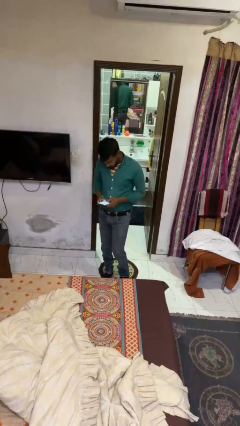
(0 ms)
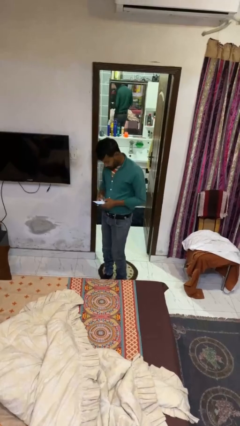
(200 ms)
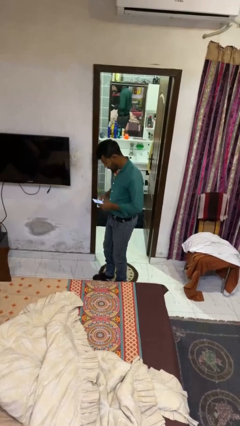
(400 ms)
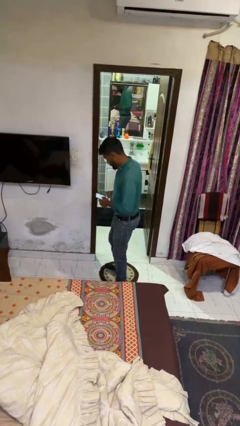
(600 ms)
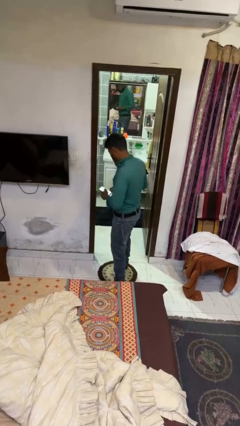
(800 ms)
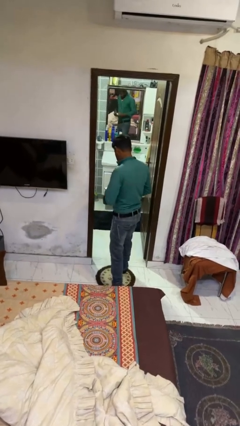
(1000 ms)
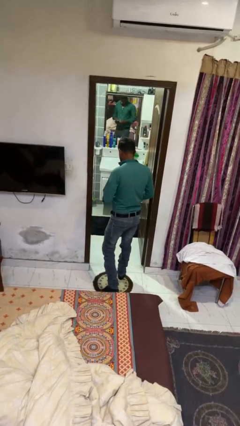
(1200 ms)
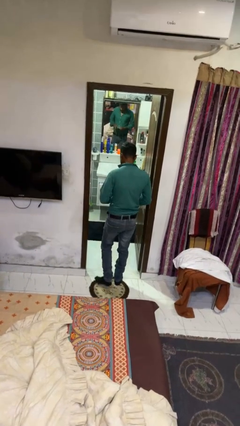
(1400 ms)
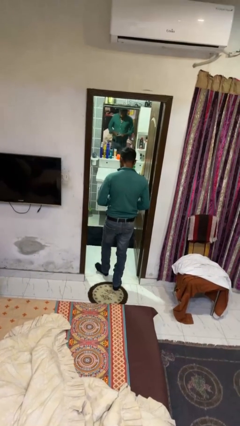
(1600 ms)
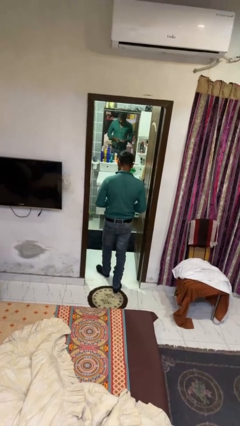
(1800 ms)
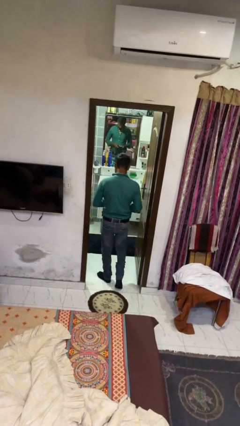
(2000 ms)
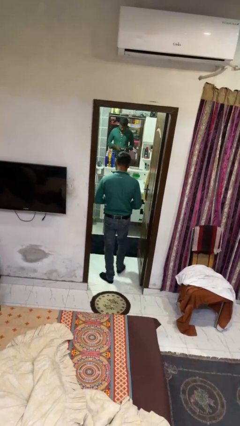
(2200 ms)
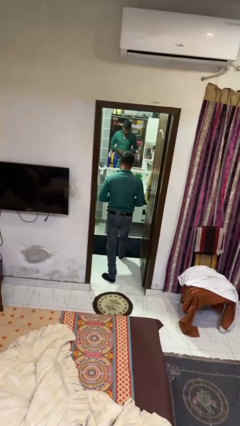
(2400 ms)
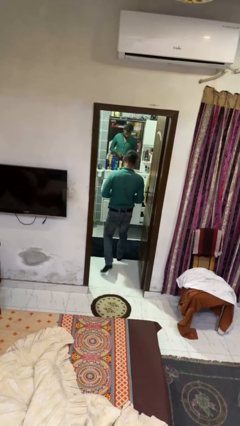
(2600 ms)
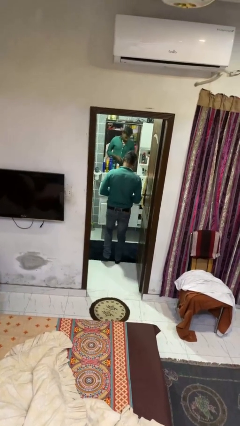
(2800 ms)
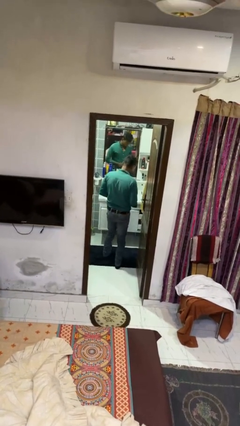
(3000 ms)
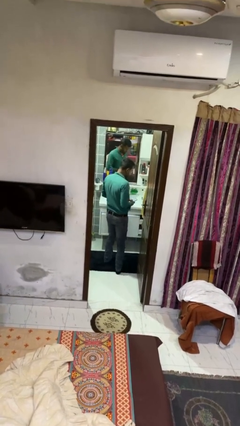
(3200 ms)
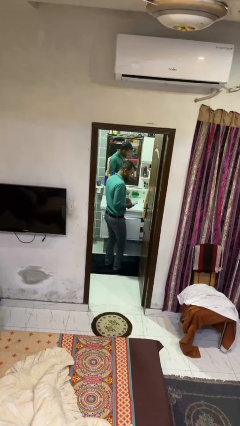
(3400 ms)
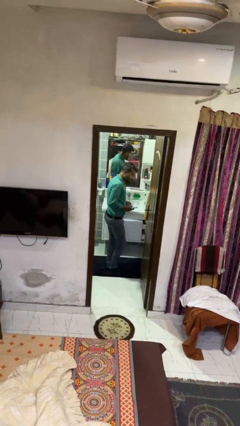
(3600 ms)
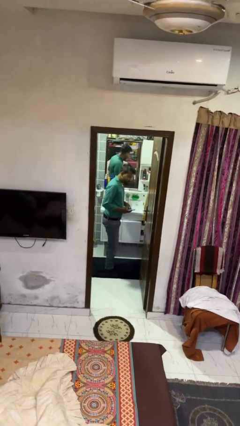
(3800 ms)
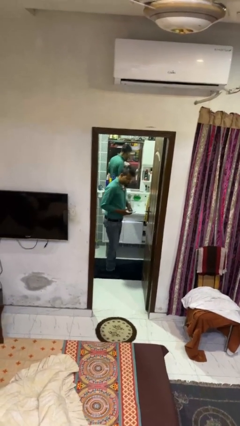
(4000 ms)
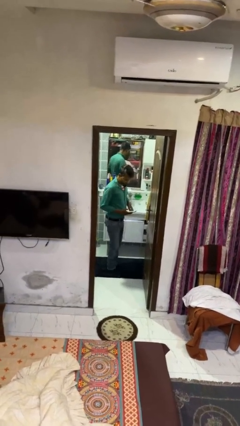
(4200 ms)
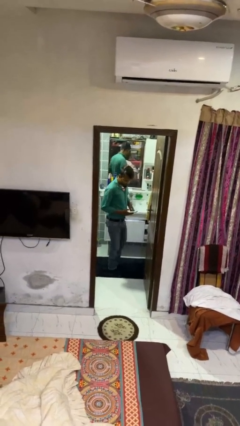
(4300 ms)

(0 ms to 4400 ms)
person exits scene through structure

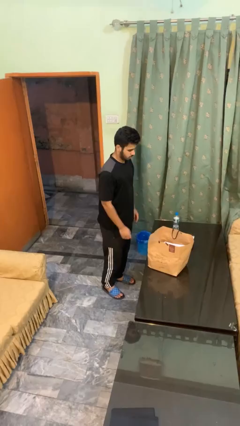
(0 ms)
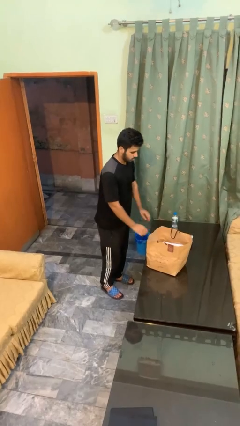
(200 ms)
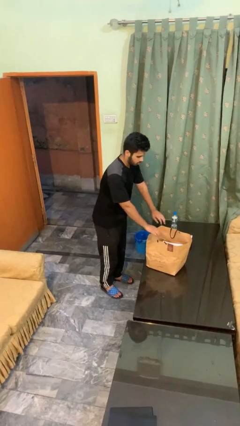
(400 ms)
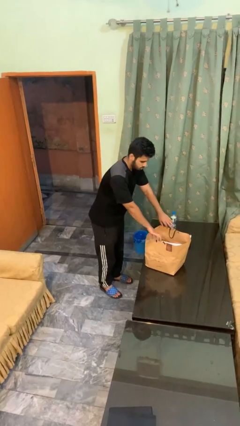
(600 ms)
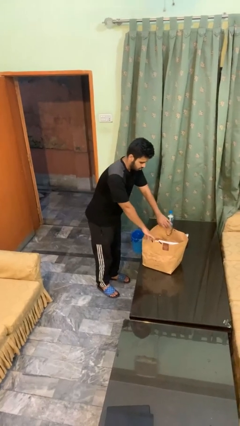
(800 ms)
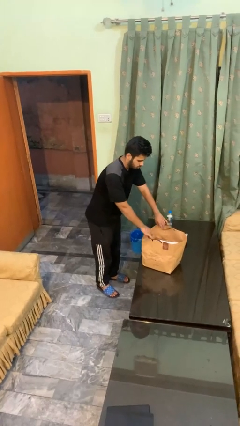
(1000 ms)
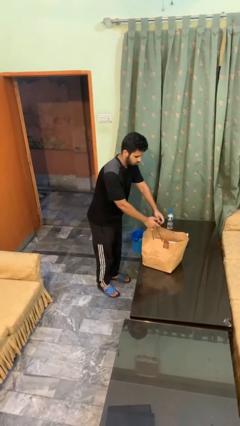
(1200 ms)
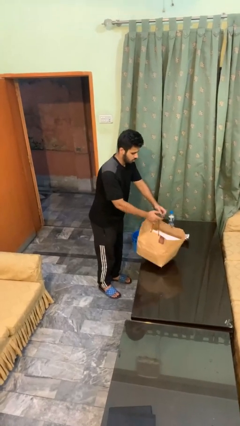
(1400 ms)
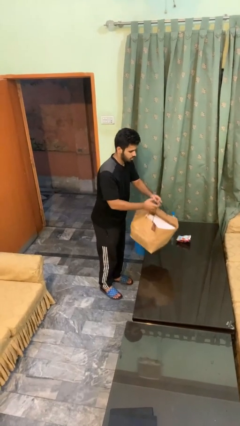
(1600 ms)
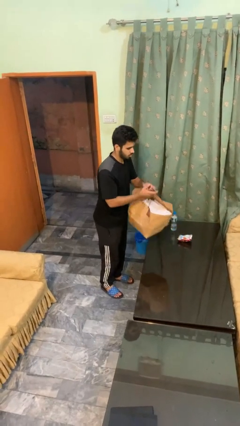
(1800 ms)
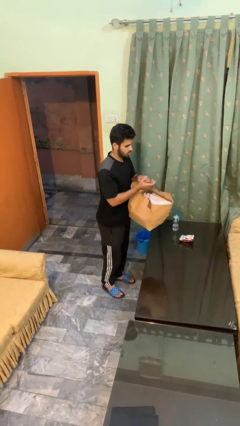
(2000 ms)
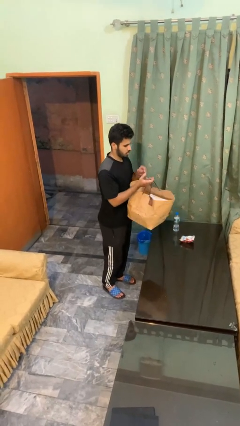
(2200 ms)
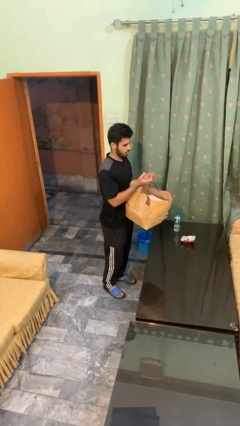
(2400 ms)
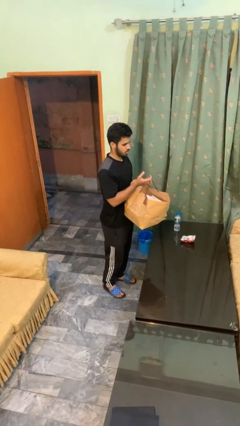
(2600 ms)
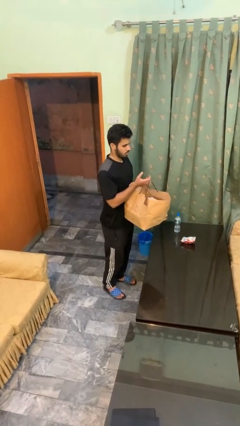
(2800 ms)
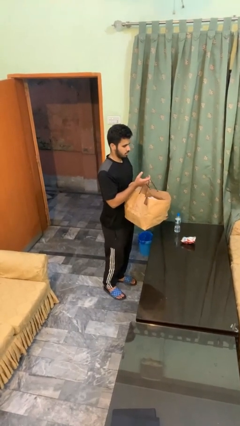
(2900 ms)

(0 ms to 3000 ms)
person picks up object from countertop

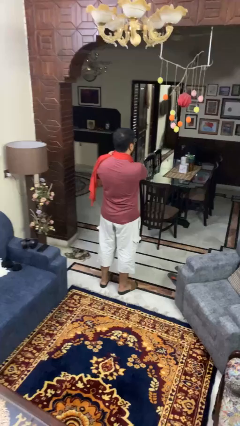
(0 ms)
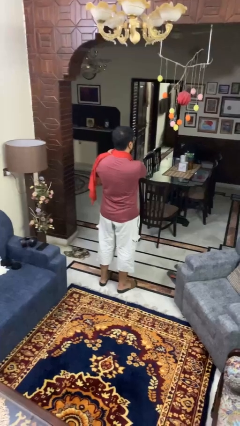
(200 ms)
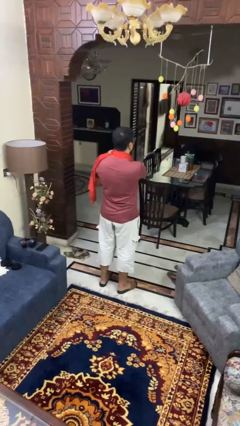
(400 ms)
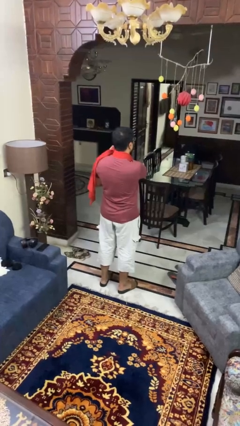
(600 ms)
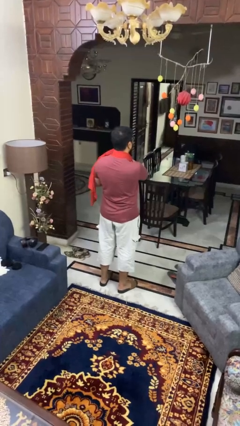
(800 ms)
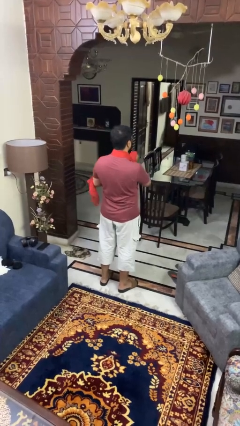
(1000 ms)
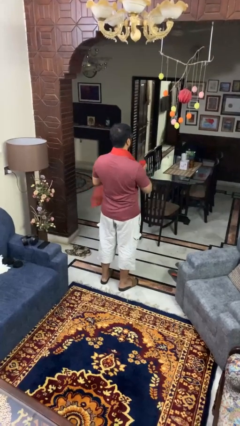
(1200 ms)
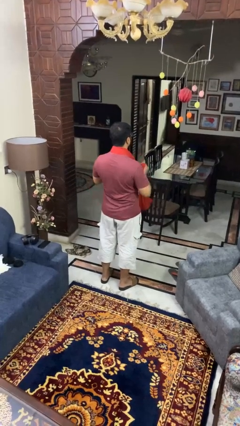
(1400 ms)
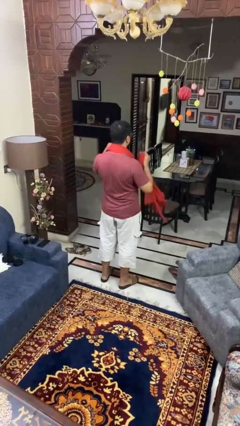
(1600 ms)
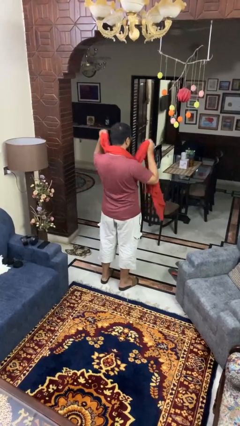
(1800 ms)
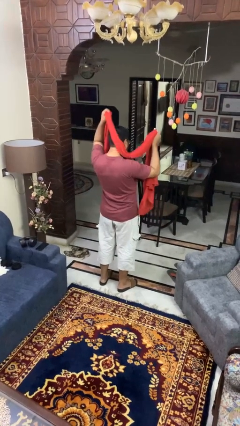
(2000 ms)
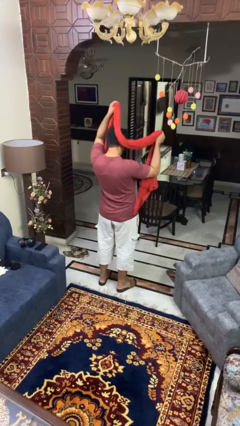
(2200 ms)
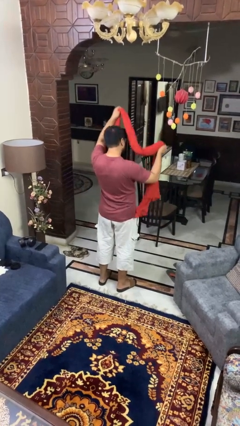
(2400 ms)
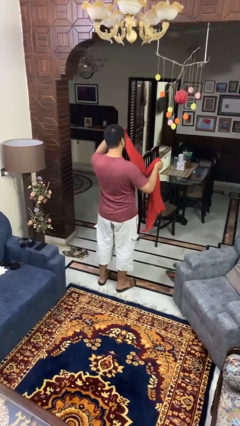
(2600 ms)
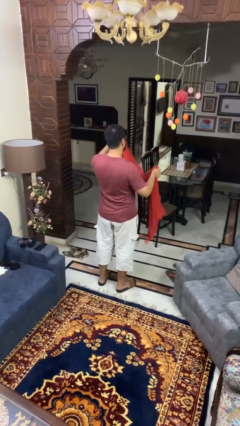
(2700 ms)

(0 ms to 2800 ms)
person takes off scarf

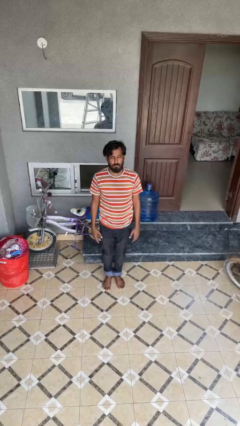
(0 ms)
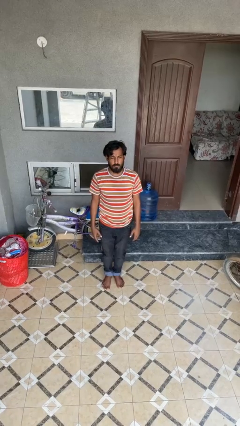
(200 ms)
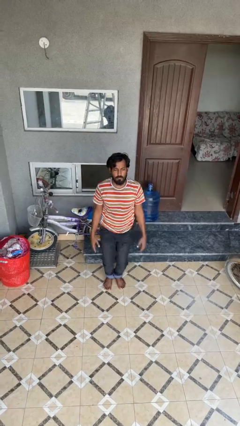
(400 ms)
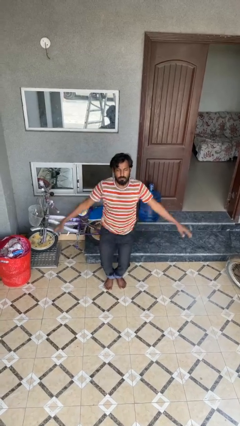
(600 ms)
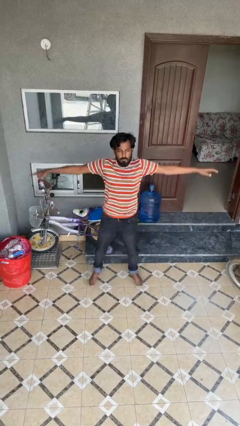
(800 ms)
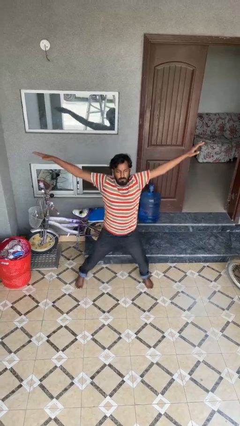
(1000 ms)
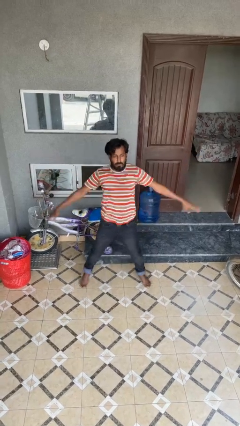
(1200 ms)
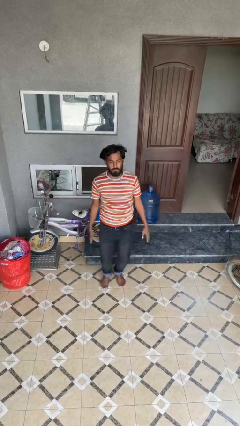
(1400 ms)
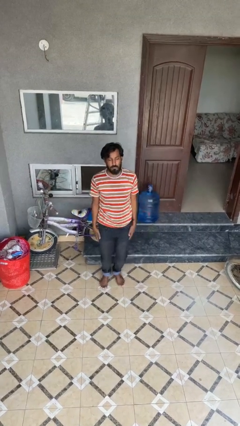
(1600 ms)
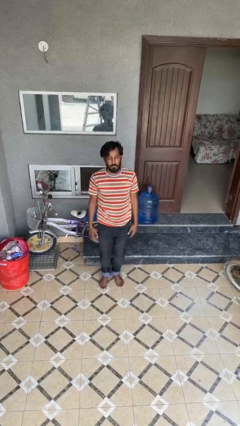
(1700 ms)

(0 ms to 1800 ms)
person exercises with jumping jacks

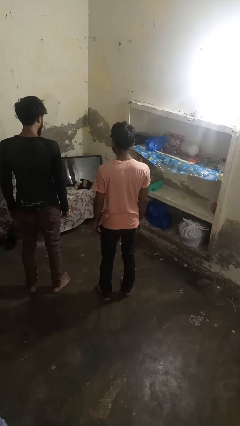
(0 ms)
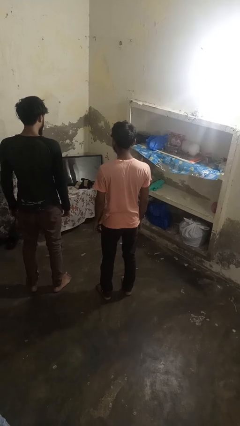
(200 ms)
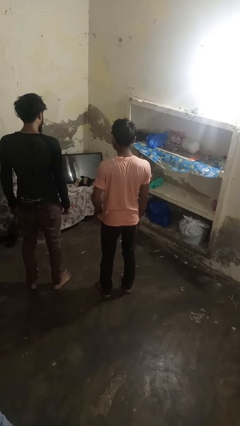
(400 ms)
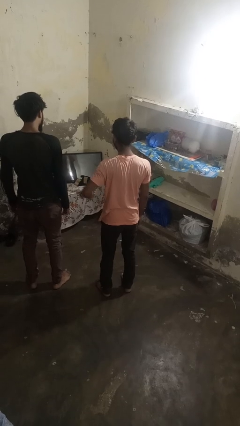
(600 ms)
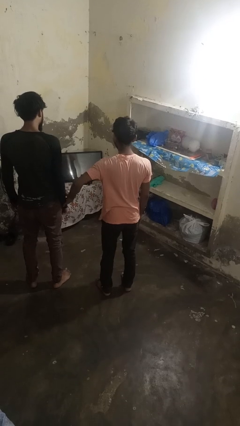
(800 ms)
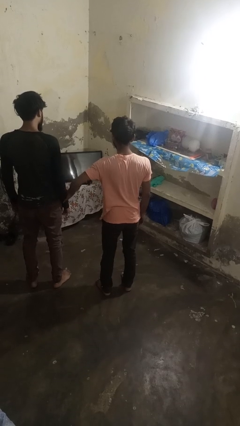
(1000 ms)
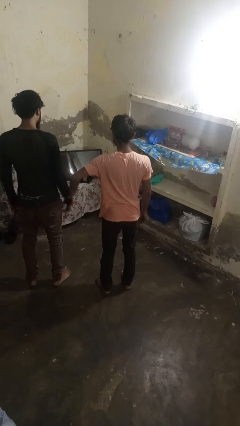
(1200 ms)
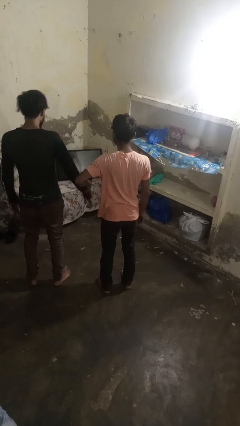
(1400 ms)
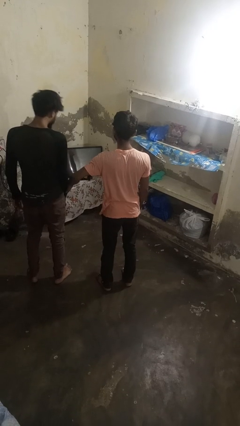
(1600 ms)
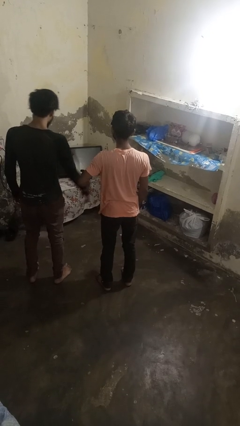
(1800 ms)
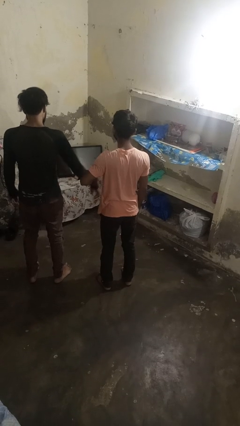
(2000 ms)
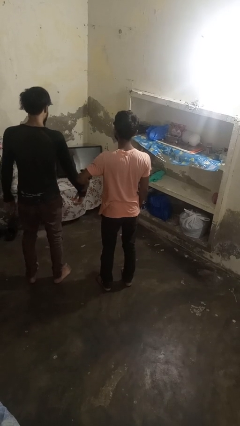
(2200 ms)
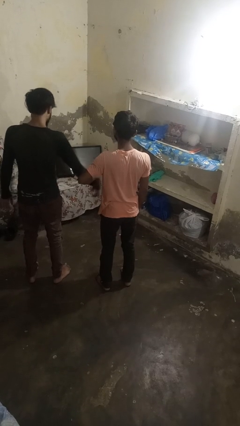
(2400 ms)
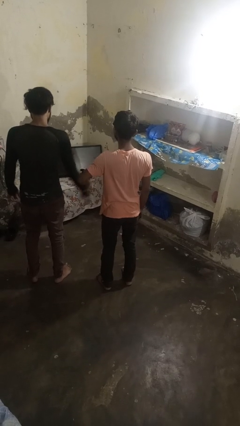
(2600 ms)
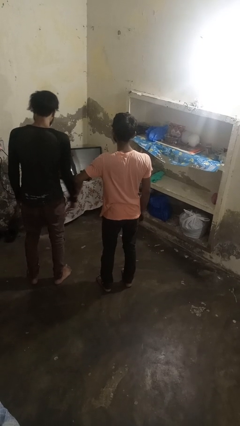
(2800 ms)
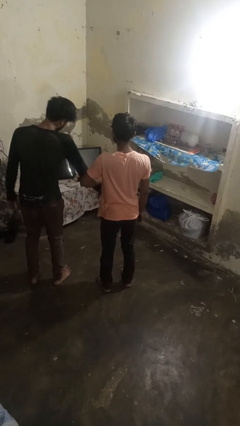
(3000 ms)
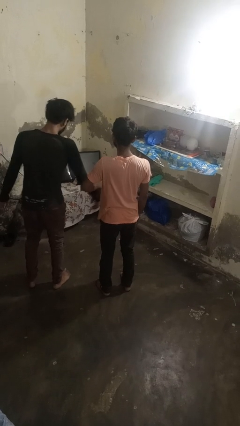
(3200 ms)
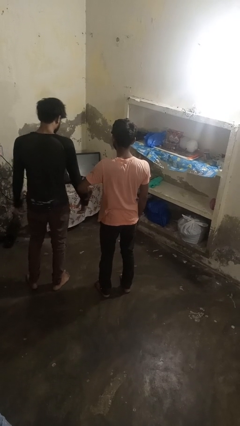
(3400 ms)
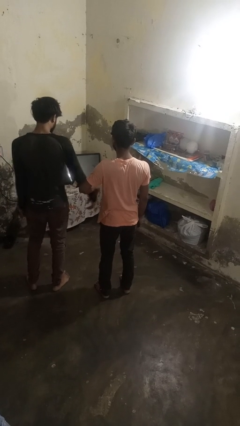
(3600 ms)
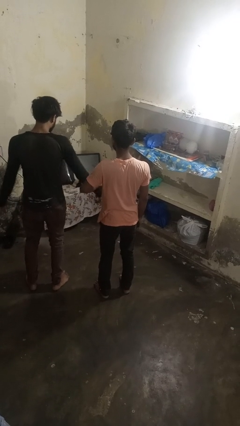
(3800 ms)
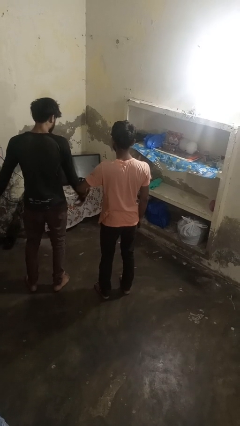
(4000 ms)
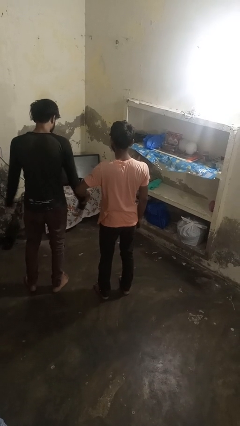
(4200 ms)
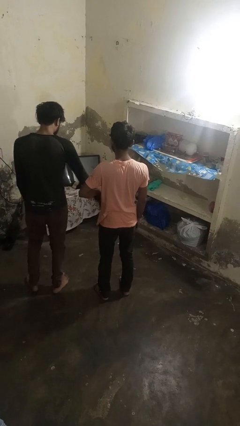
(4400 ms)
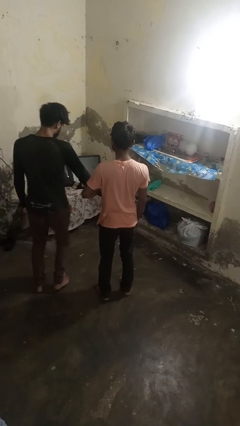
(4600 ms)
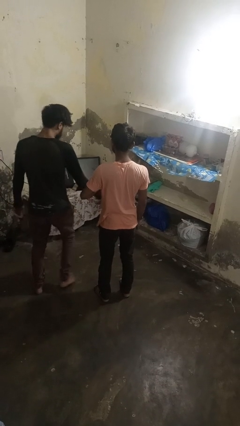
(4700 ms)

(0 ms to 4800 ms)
person grabs person by forearm

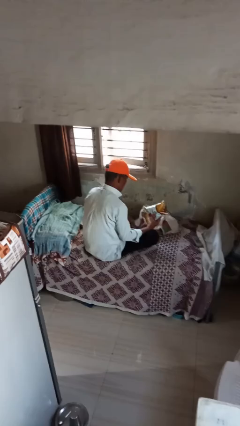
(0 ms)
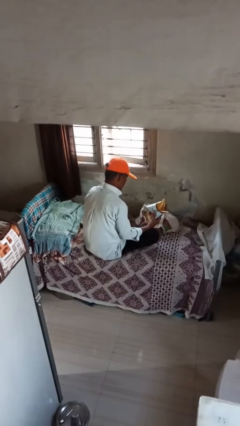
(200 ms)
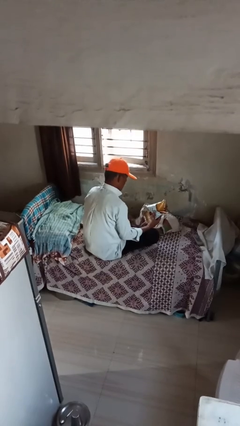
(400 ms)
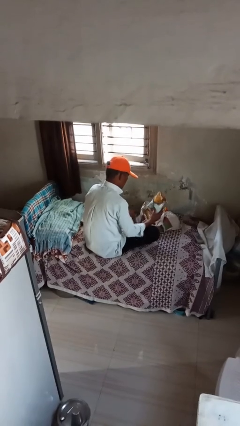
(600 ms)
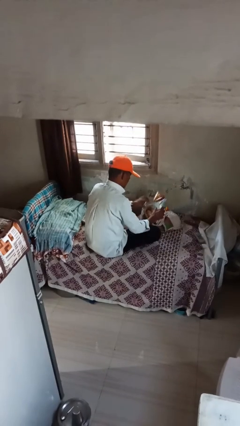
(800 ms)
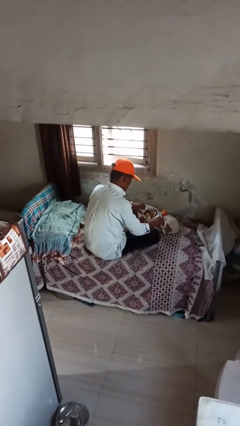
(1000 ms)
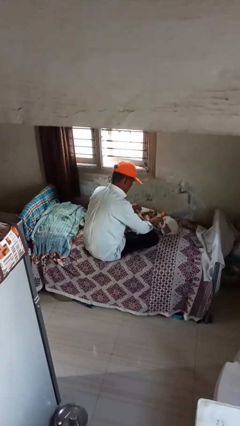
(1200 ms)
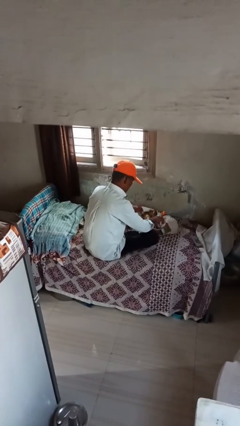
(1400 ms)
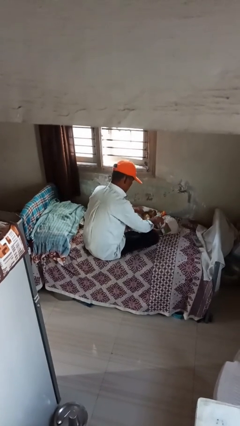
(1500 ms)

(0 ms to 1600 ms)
person puts object into bag
